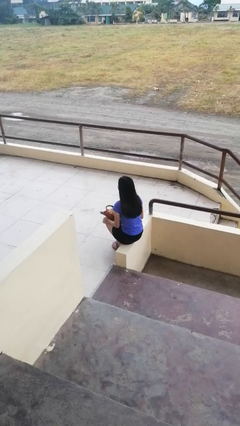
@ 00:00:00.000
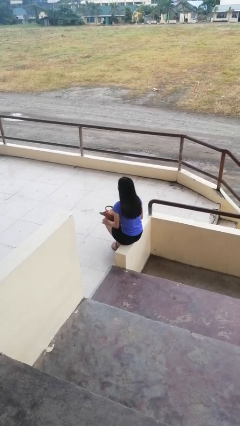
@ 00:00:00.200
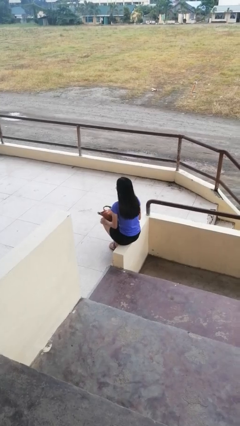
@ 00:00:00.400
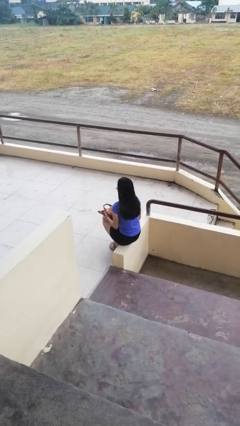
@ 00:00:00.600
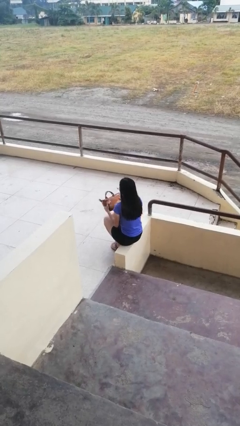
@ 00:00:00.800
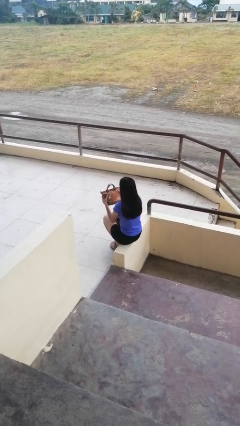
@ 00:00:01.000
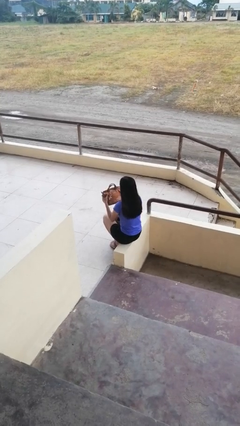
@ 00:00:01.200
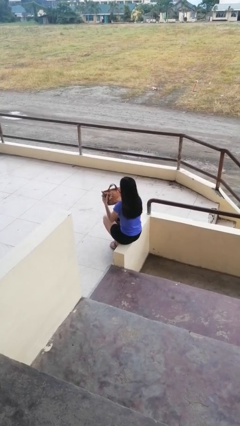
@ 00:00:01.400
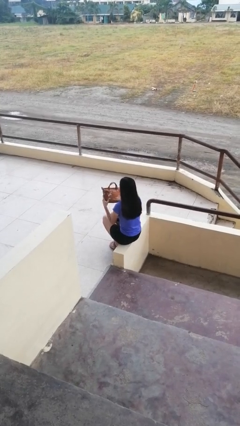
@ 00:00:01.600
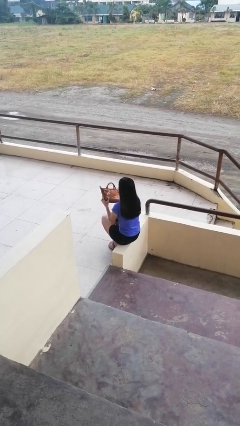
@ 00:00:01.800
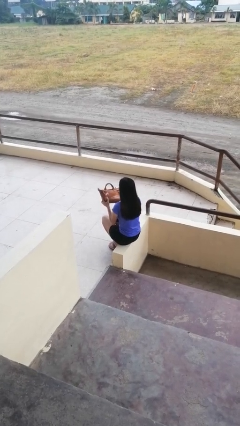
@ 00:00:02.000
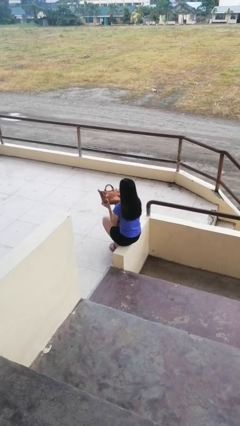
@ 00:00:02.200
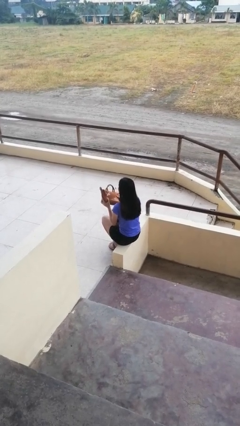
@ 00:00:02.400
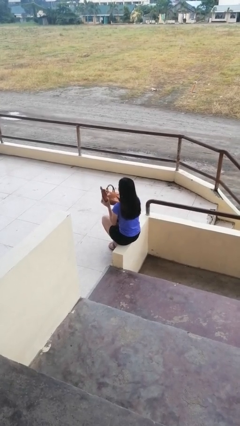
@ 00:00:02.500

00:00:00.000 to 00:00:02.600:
person taps object with finger

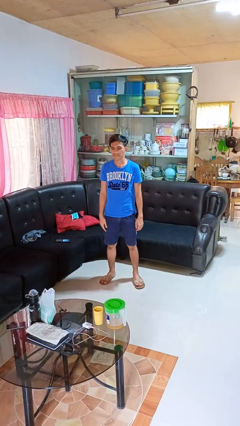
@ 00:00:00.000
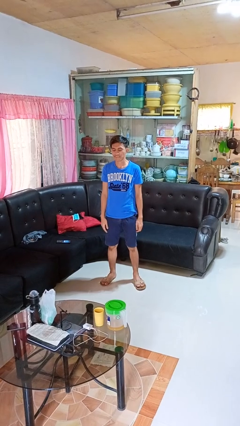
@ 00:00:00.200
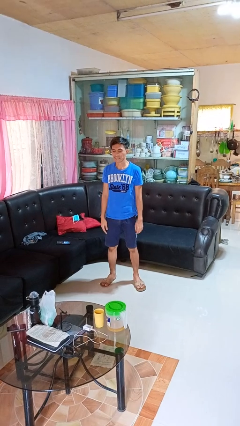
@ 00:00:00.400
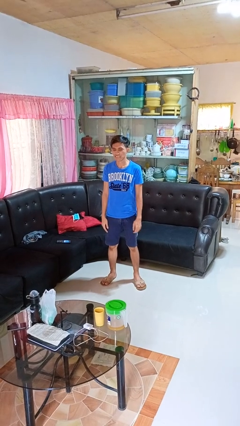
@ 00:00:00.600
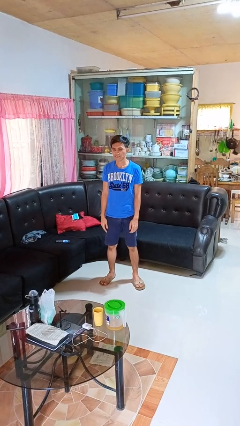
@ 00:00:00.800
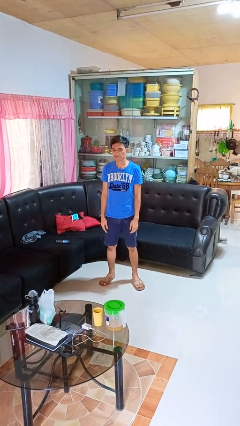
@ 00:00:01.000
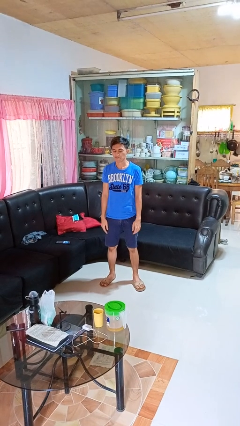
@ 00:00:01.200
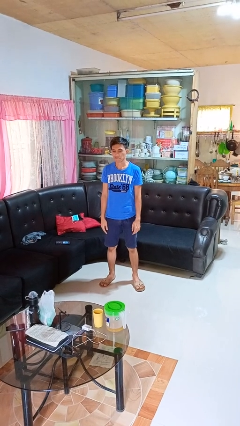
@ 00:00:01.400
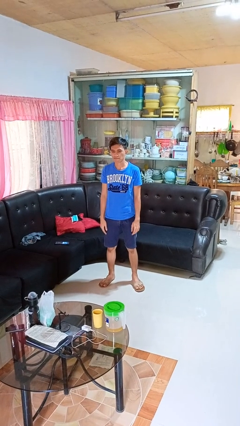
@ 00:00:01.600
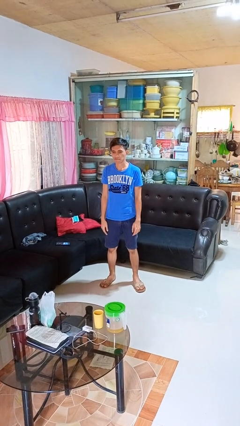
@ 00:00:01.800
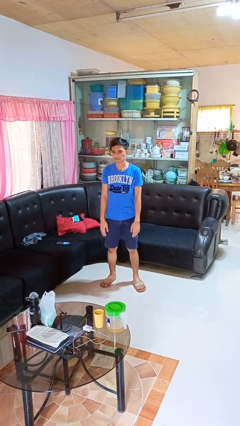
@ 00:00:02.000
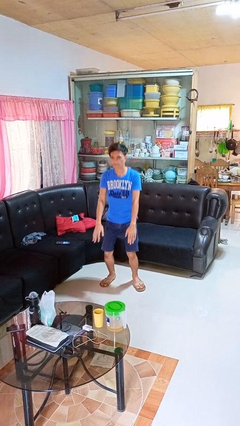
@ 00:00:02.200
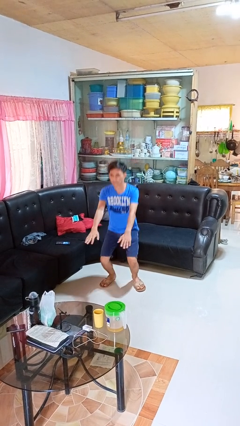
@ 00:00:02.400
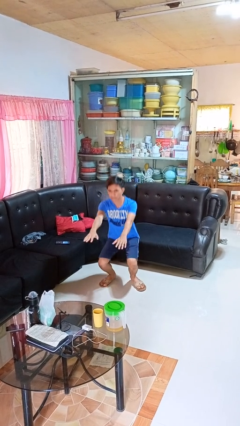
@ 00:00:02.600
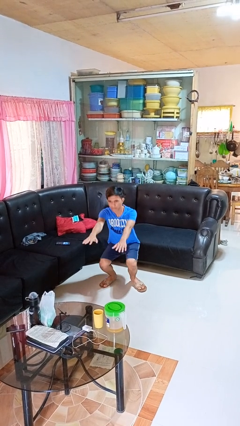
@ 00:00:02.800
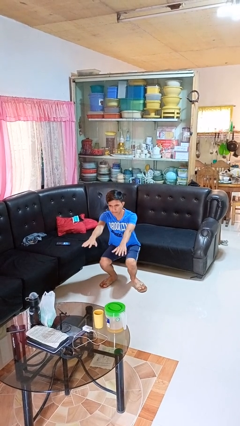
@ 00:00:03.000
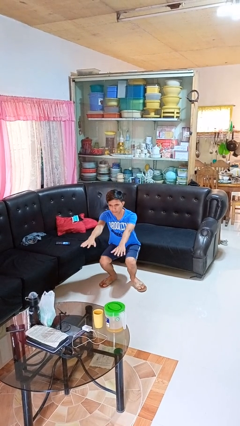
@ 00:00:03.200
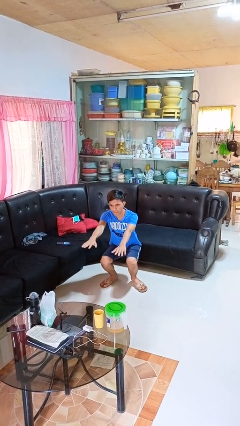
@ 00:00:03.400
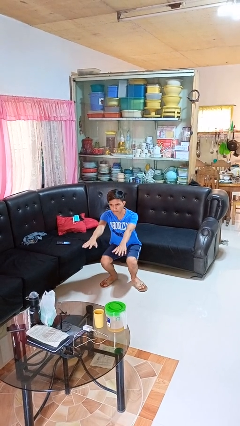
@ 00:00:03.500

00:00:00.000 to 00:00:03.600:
person squats

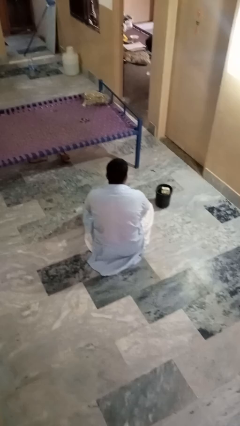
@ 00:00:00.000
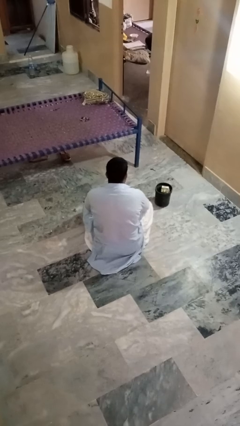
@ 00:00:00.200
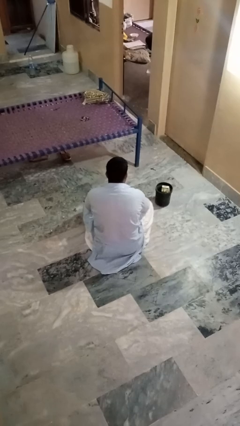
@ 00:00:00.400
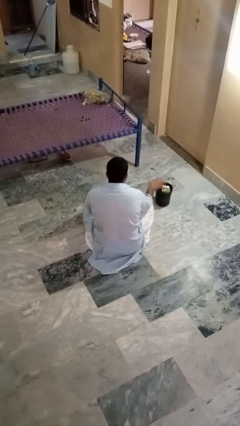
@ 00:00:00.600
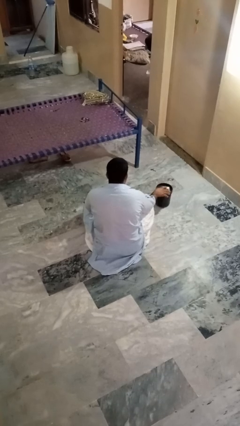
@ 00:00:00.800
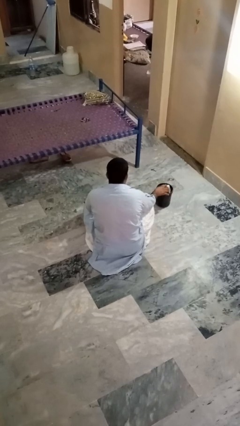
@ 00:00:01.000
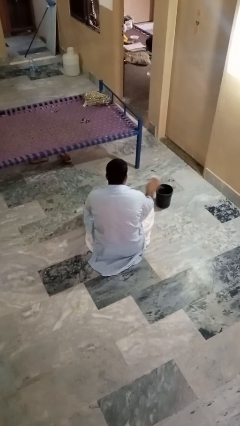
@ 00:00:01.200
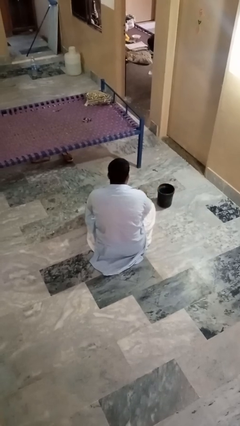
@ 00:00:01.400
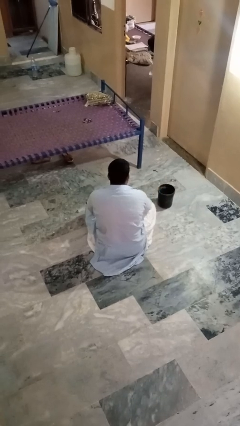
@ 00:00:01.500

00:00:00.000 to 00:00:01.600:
person takes object from basket

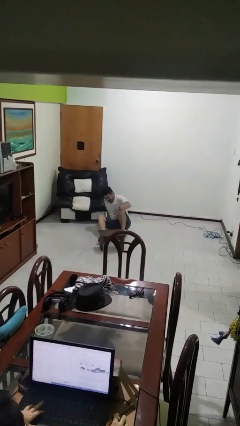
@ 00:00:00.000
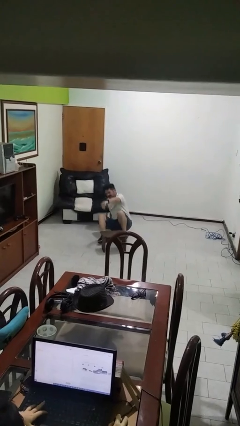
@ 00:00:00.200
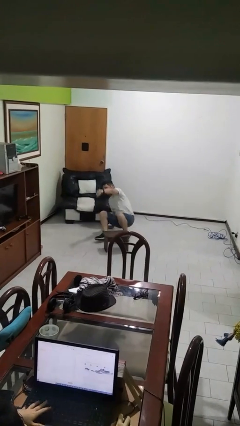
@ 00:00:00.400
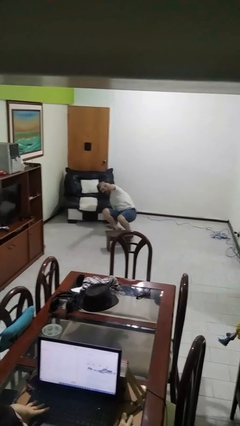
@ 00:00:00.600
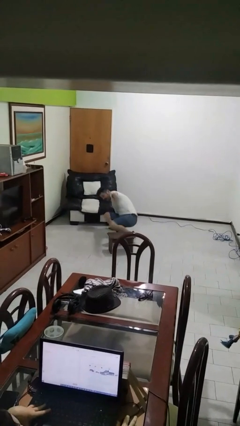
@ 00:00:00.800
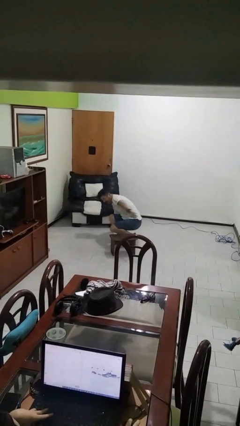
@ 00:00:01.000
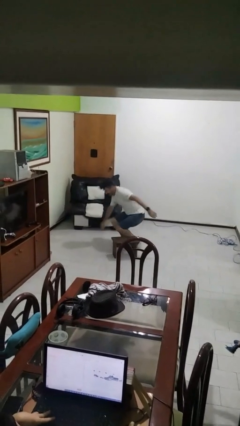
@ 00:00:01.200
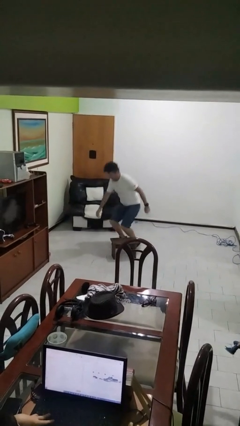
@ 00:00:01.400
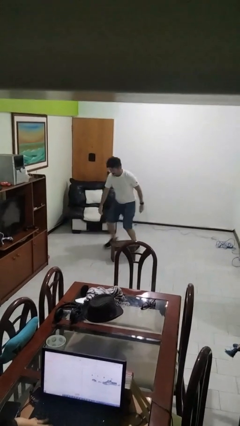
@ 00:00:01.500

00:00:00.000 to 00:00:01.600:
person stands up from floor

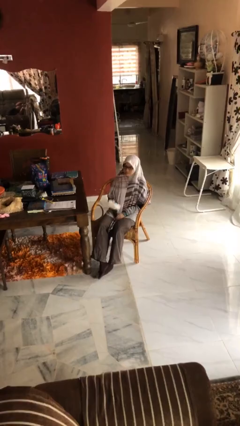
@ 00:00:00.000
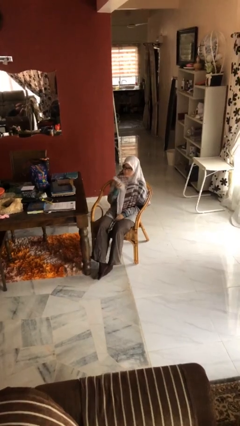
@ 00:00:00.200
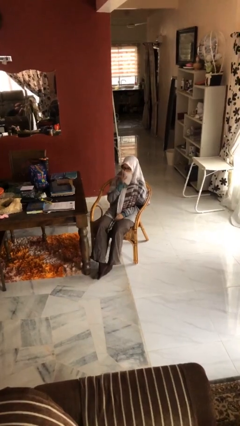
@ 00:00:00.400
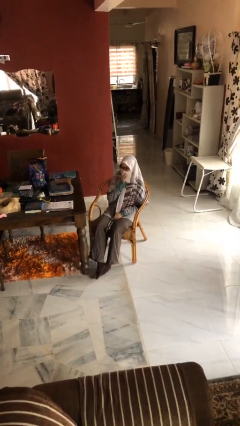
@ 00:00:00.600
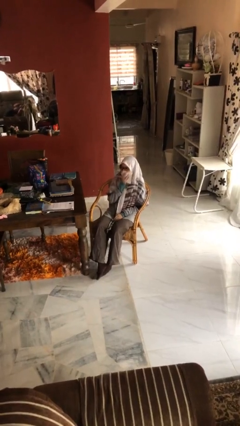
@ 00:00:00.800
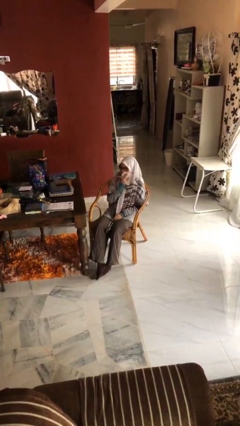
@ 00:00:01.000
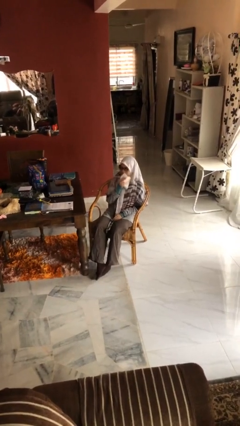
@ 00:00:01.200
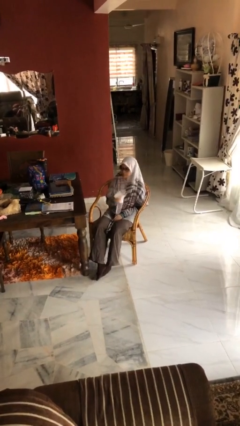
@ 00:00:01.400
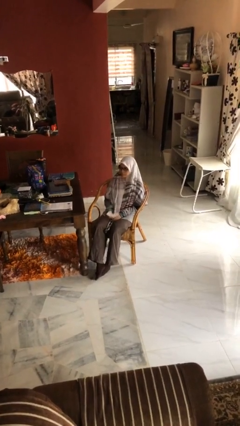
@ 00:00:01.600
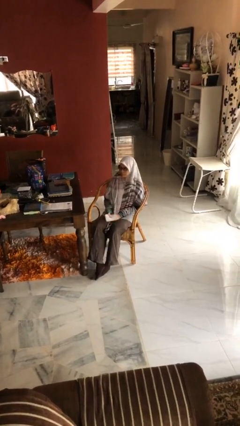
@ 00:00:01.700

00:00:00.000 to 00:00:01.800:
person wipes mouth with napkin

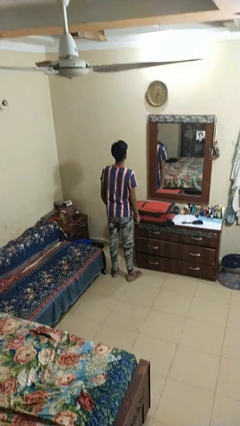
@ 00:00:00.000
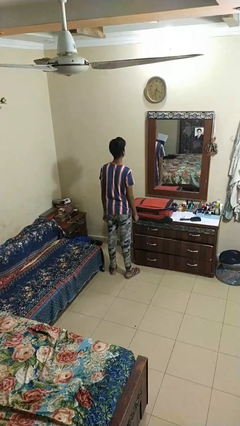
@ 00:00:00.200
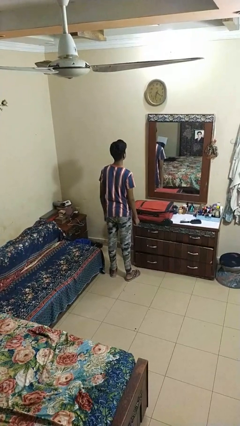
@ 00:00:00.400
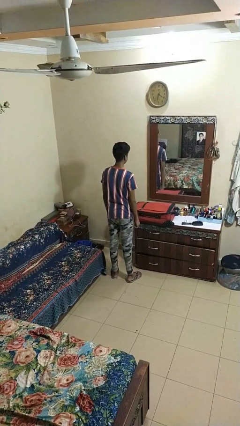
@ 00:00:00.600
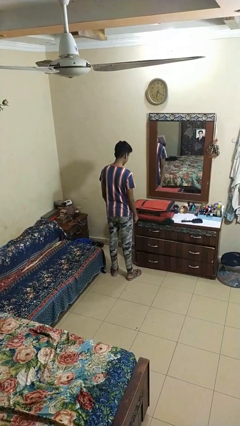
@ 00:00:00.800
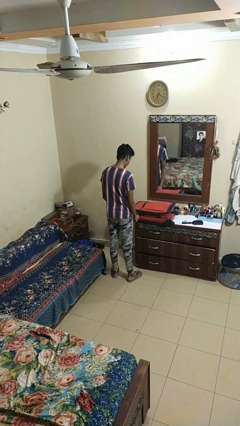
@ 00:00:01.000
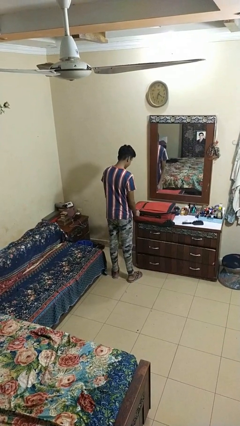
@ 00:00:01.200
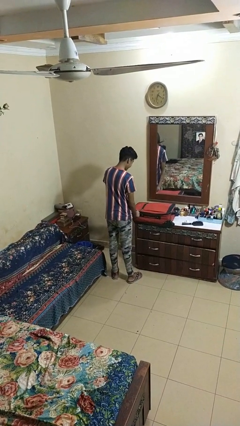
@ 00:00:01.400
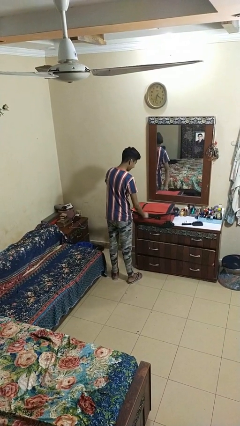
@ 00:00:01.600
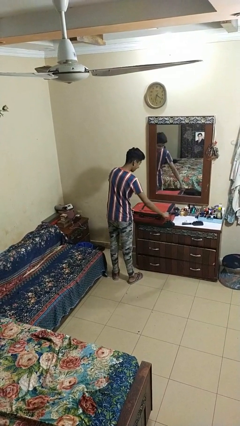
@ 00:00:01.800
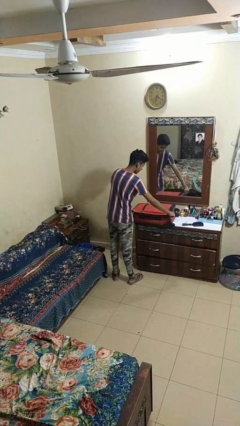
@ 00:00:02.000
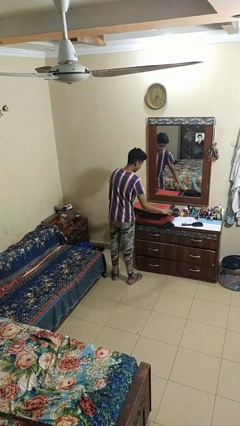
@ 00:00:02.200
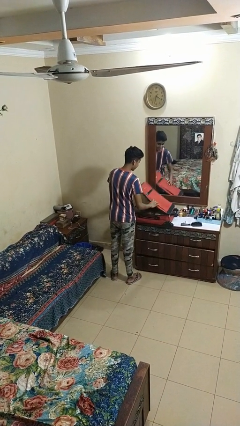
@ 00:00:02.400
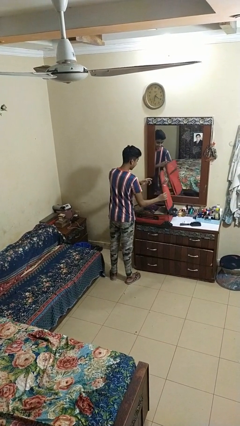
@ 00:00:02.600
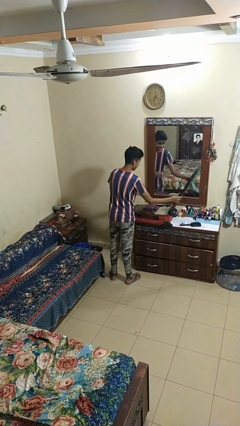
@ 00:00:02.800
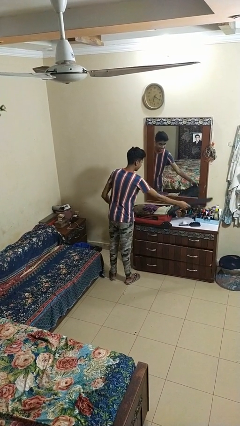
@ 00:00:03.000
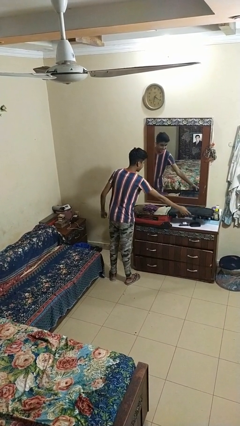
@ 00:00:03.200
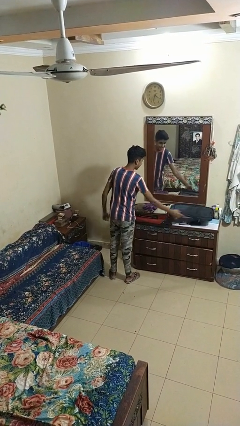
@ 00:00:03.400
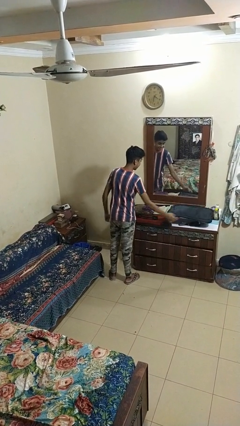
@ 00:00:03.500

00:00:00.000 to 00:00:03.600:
person opens suitcase

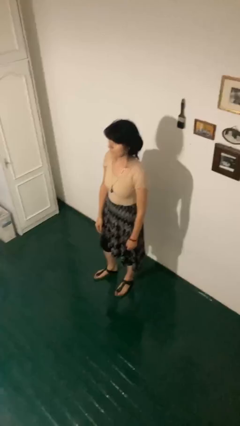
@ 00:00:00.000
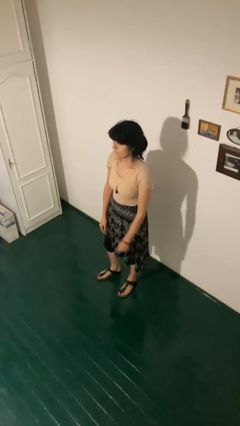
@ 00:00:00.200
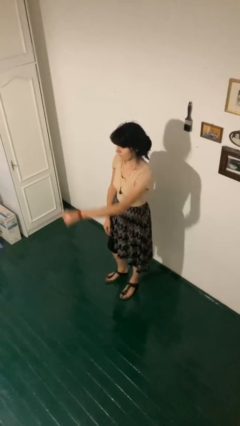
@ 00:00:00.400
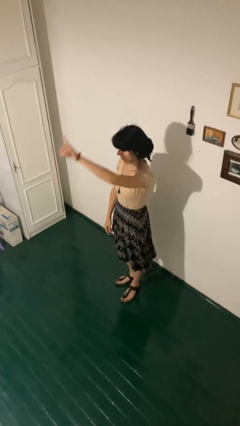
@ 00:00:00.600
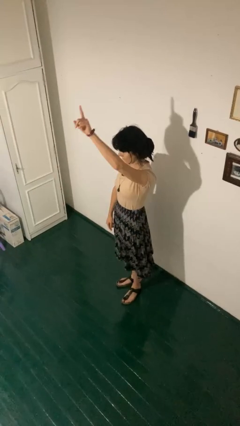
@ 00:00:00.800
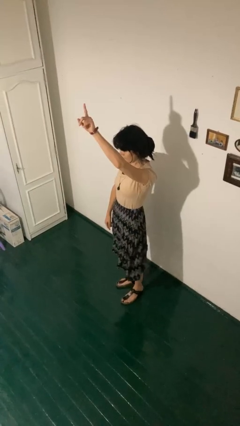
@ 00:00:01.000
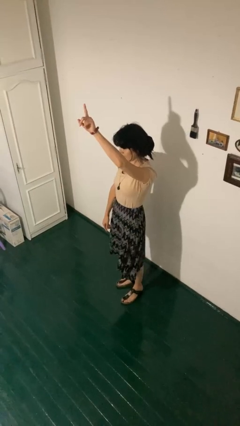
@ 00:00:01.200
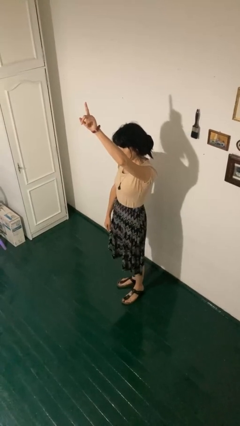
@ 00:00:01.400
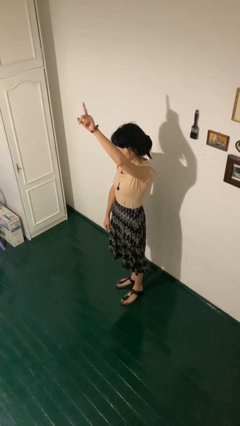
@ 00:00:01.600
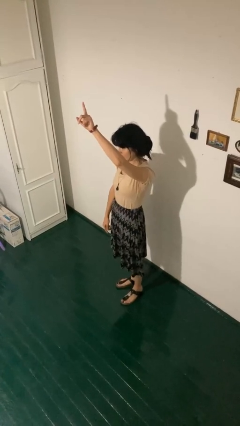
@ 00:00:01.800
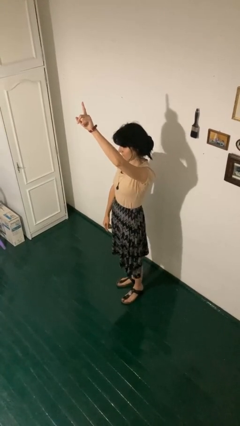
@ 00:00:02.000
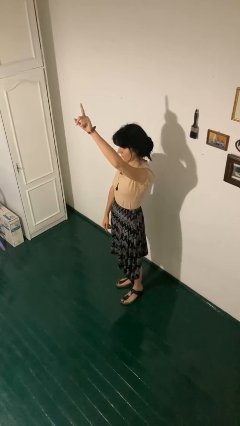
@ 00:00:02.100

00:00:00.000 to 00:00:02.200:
person gestures raise hand
